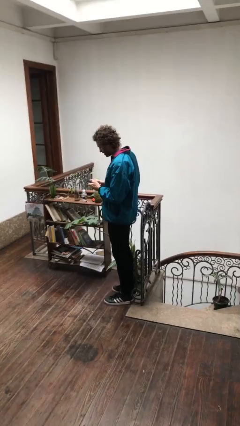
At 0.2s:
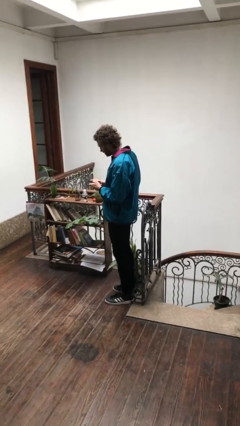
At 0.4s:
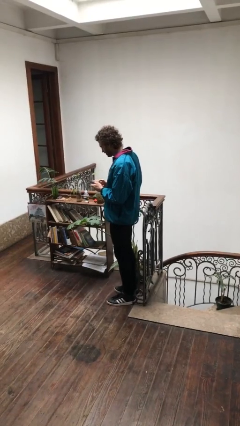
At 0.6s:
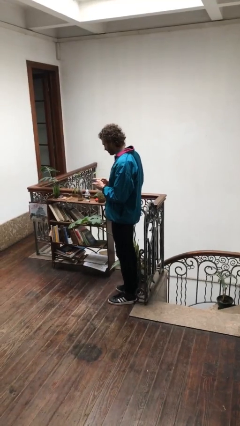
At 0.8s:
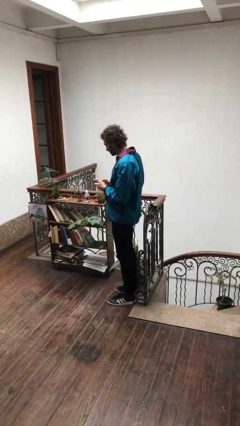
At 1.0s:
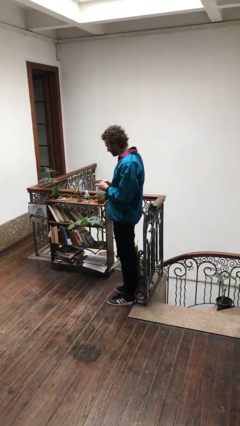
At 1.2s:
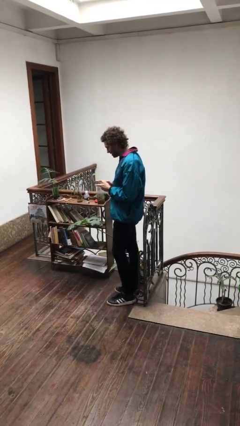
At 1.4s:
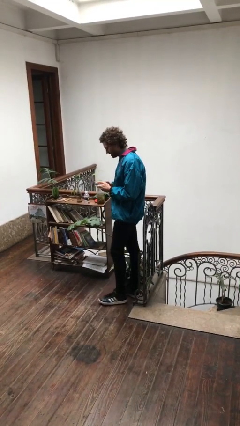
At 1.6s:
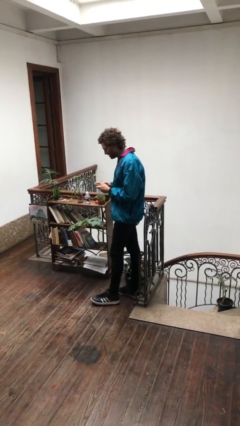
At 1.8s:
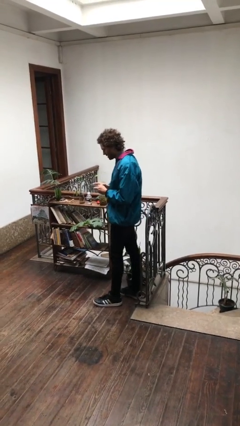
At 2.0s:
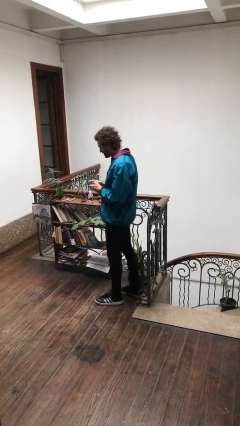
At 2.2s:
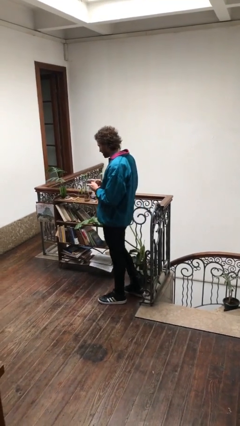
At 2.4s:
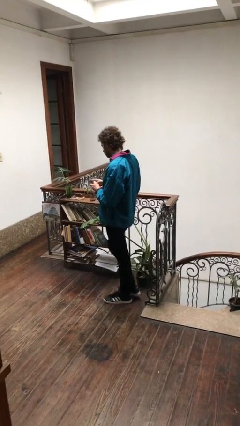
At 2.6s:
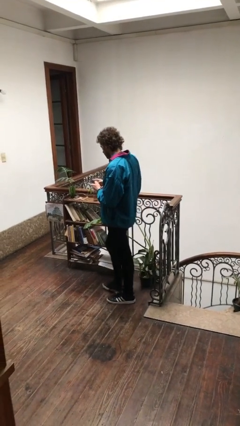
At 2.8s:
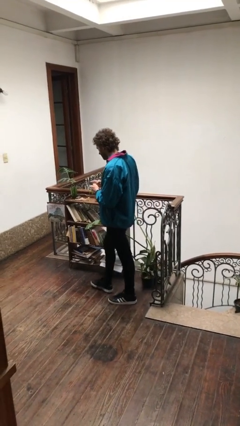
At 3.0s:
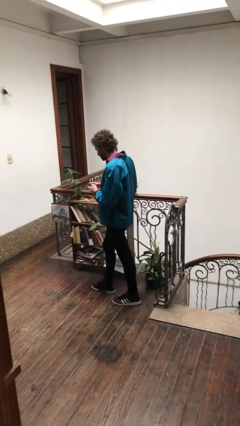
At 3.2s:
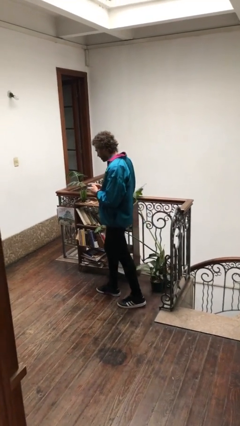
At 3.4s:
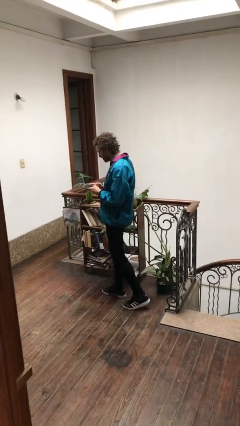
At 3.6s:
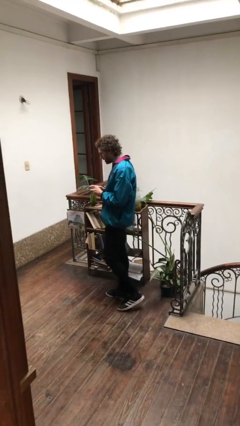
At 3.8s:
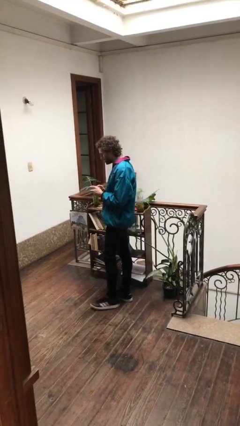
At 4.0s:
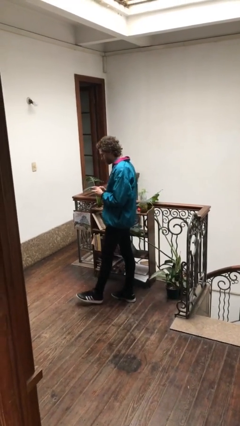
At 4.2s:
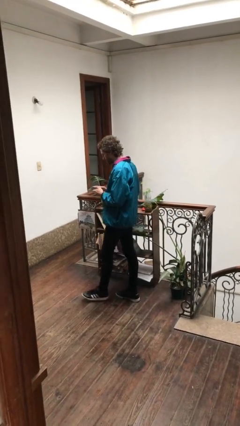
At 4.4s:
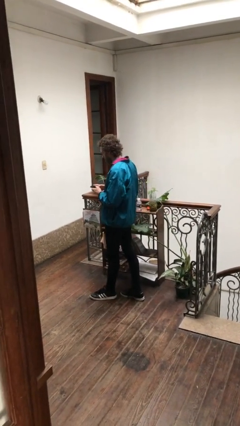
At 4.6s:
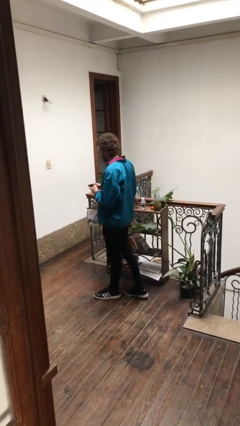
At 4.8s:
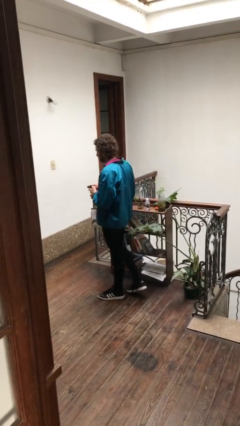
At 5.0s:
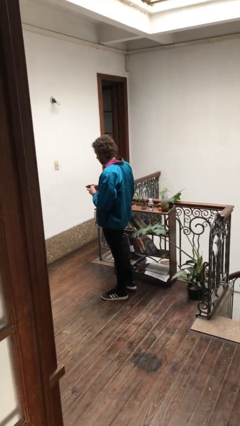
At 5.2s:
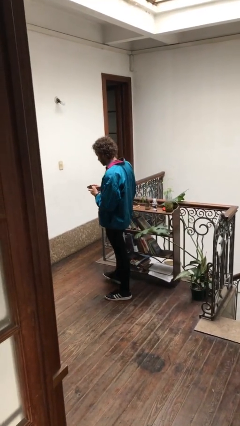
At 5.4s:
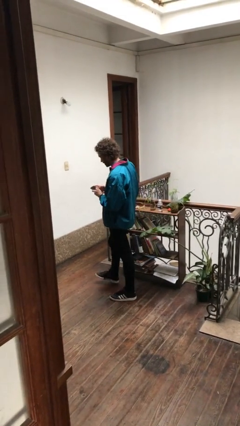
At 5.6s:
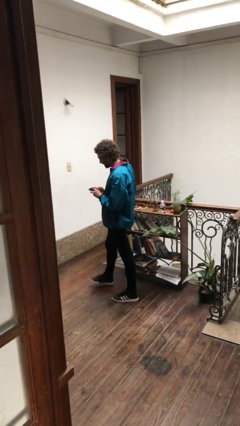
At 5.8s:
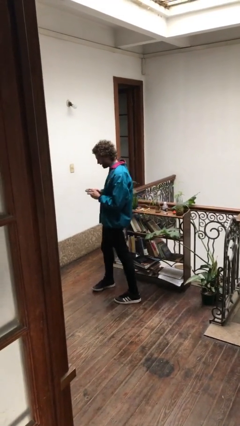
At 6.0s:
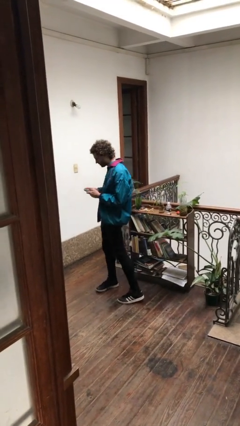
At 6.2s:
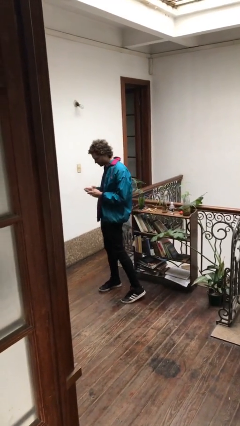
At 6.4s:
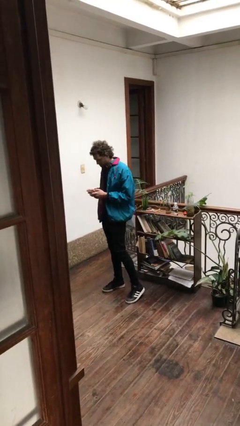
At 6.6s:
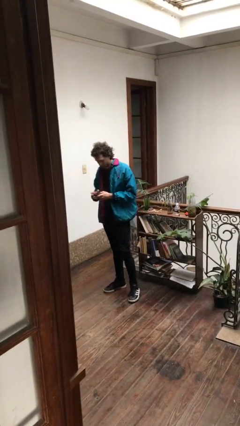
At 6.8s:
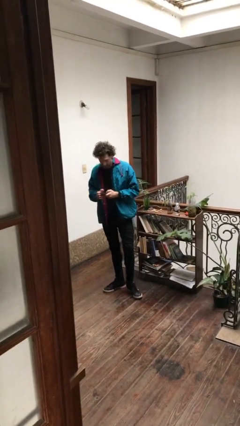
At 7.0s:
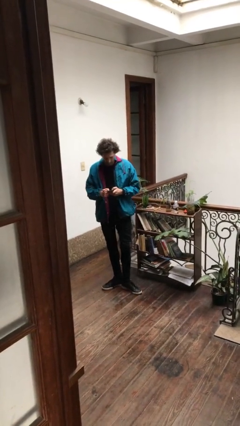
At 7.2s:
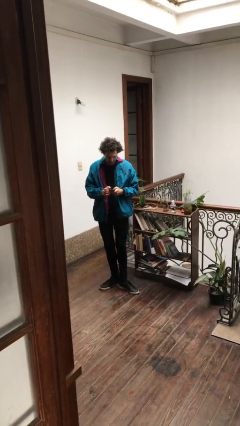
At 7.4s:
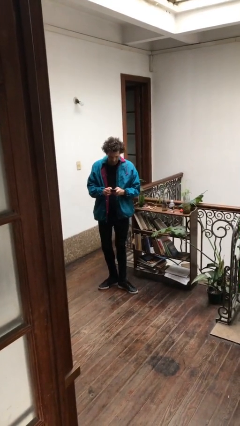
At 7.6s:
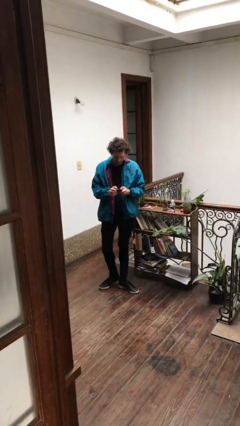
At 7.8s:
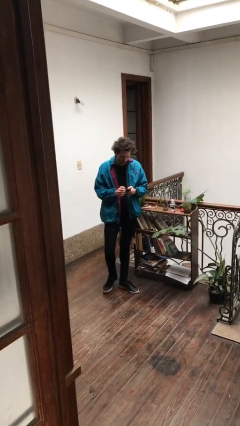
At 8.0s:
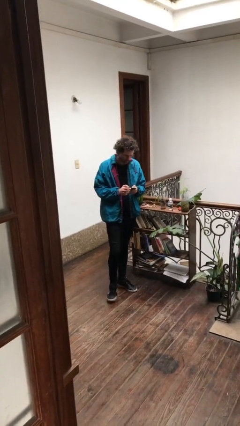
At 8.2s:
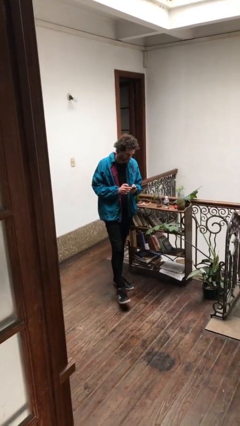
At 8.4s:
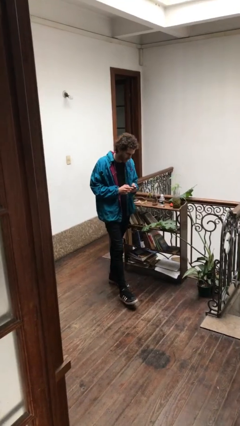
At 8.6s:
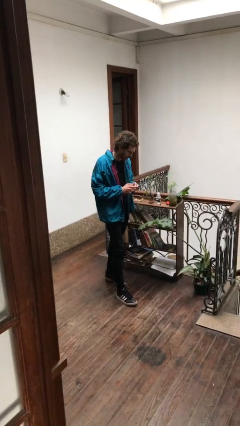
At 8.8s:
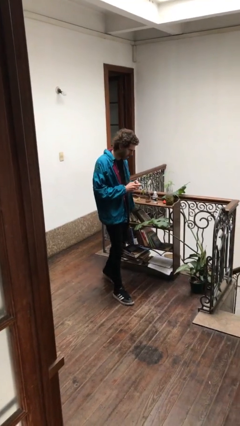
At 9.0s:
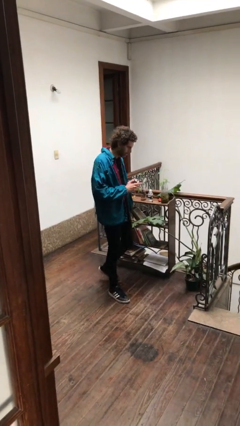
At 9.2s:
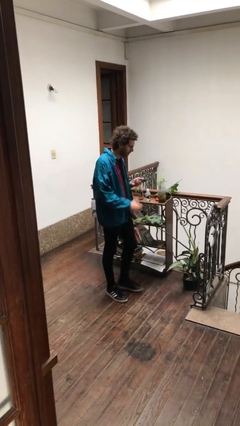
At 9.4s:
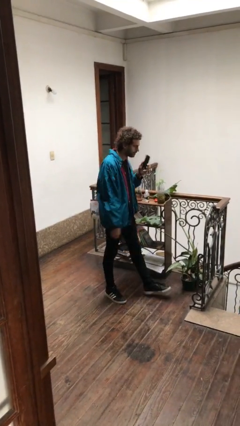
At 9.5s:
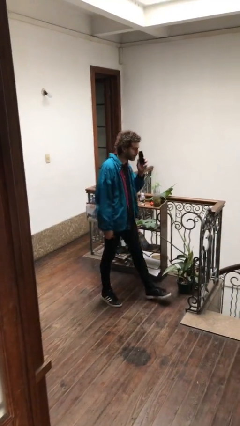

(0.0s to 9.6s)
person texts on phone

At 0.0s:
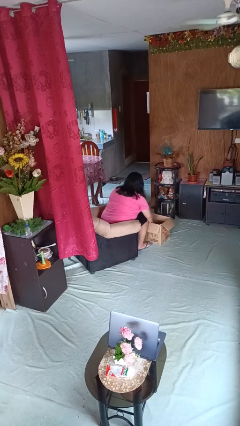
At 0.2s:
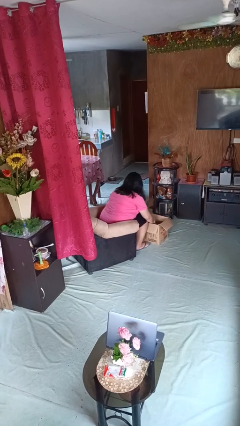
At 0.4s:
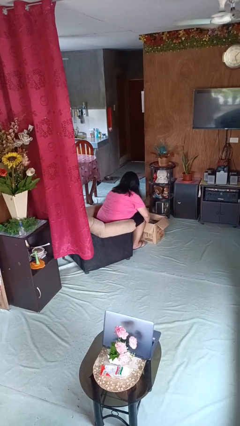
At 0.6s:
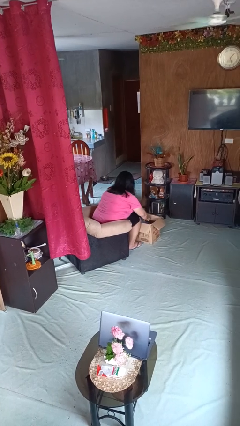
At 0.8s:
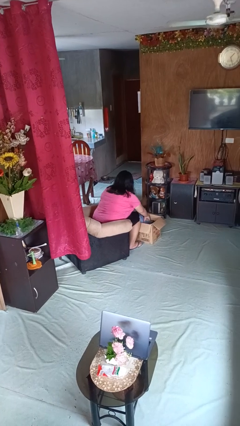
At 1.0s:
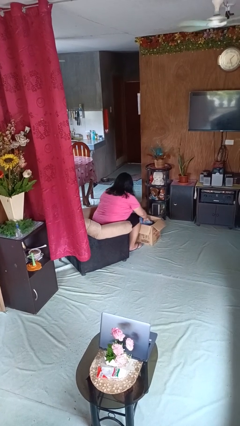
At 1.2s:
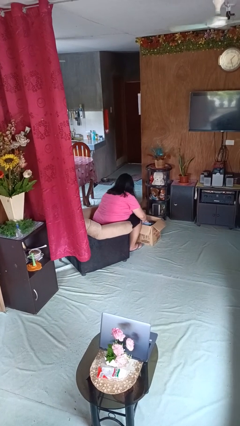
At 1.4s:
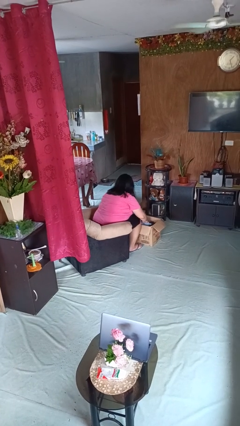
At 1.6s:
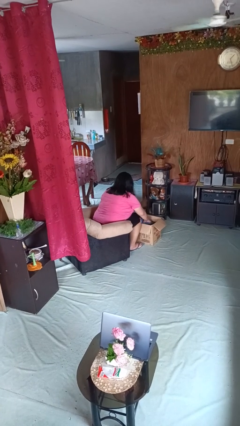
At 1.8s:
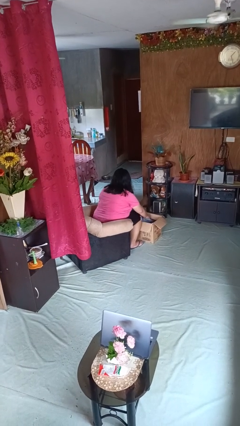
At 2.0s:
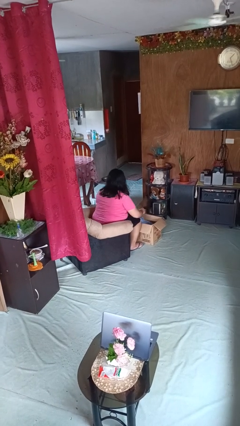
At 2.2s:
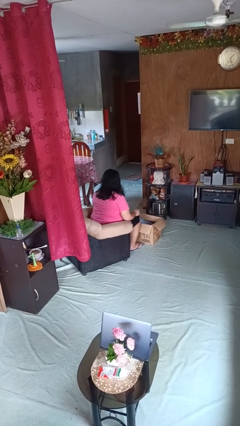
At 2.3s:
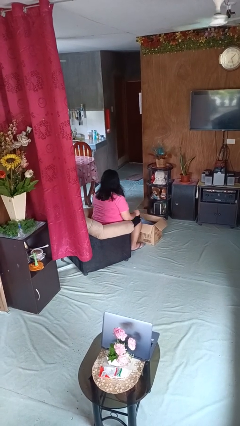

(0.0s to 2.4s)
person searches in box

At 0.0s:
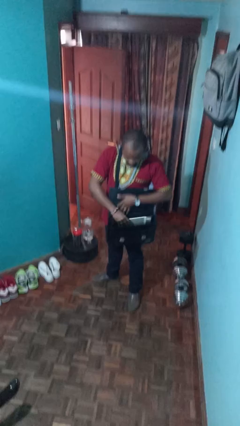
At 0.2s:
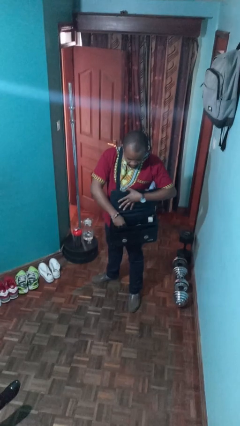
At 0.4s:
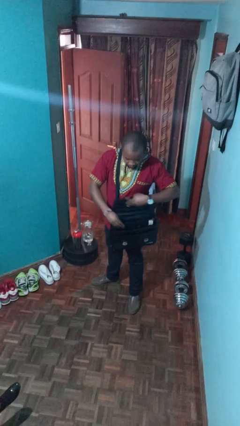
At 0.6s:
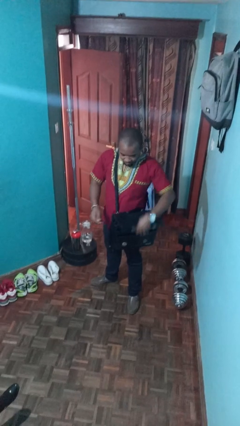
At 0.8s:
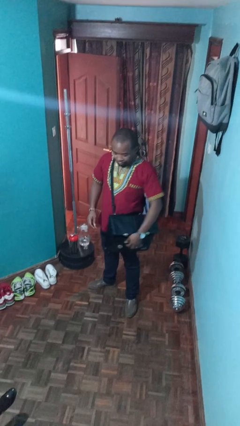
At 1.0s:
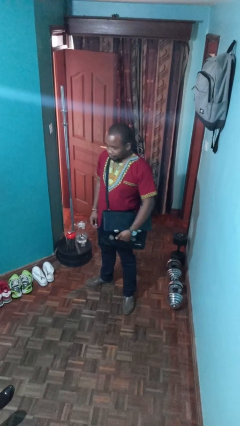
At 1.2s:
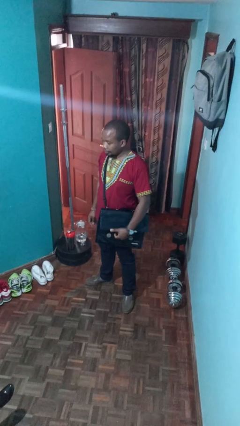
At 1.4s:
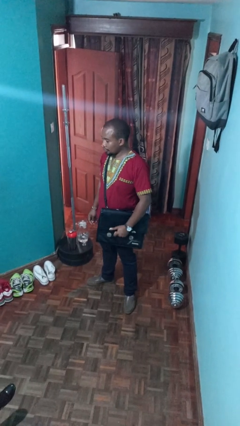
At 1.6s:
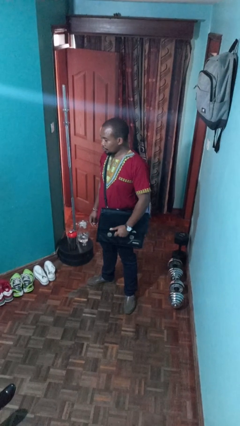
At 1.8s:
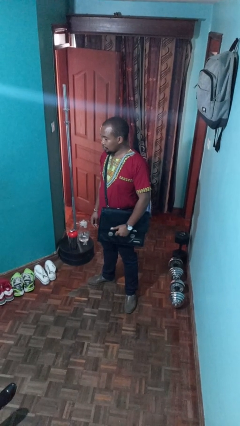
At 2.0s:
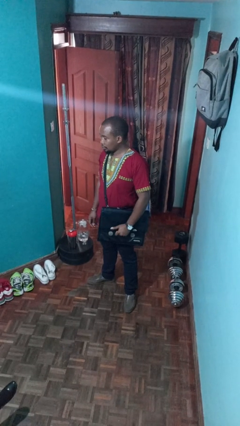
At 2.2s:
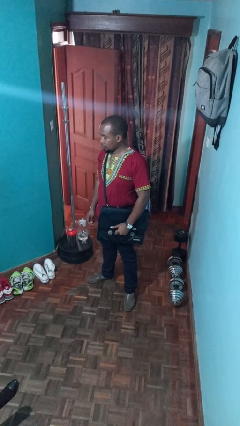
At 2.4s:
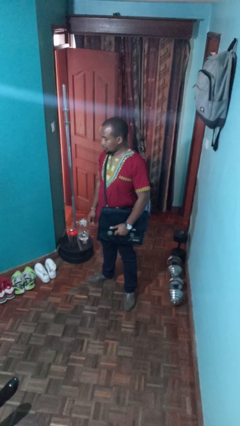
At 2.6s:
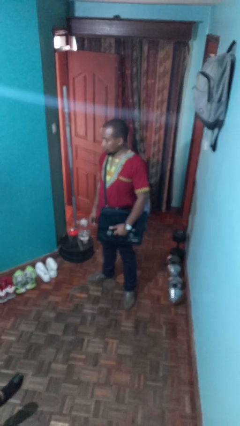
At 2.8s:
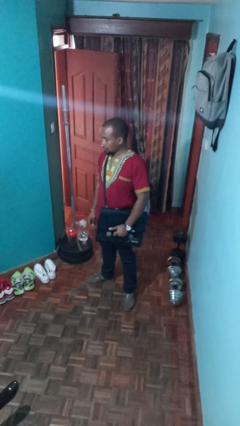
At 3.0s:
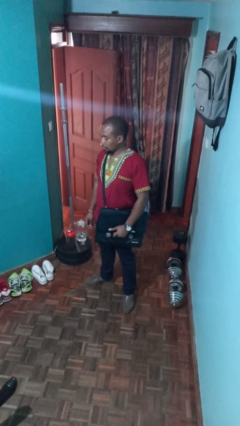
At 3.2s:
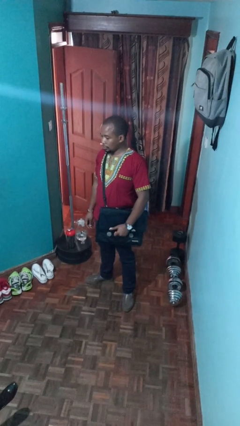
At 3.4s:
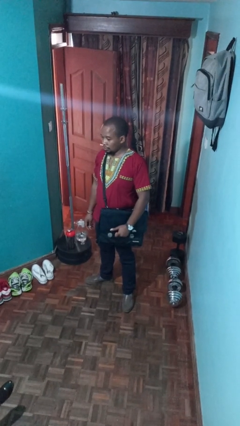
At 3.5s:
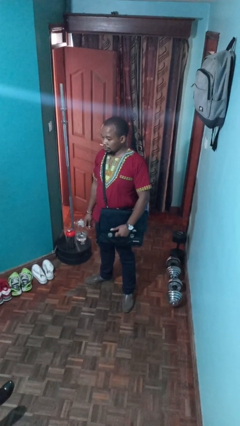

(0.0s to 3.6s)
person puts object into purse

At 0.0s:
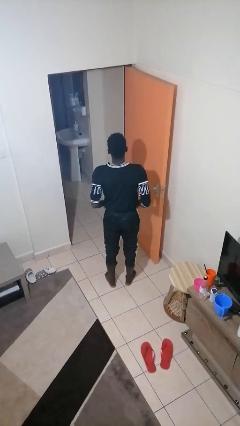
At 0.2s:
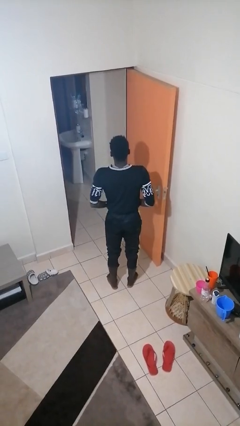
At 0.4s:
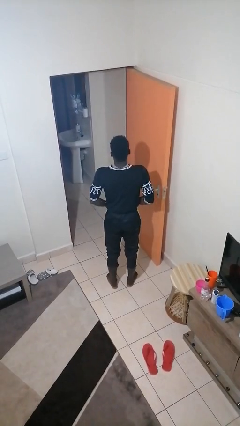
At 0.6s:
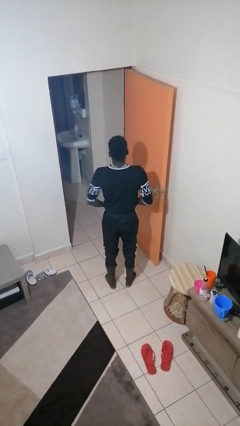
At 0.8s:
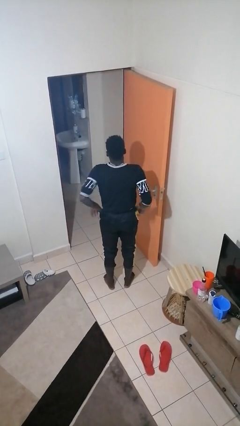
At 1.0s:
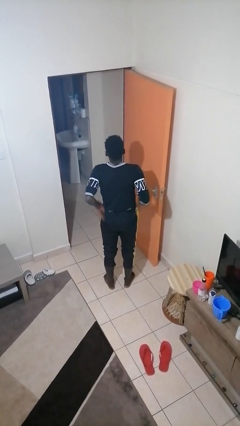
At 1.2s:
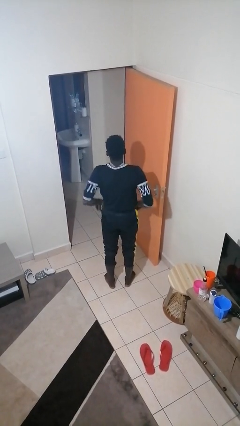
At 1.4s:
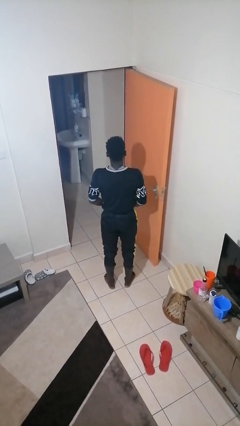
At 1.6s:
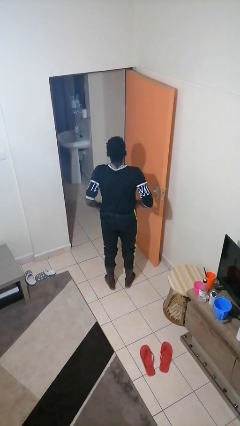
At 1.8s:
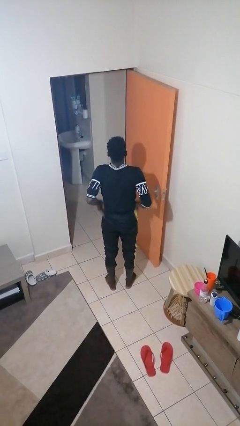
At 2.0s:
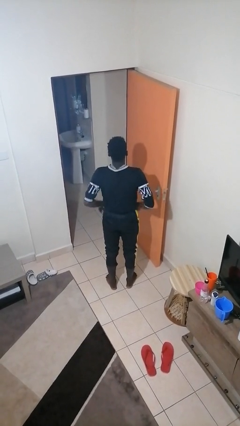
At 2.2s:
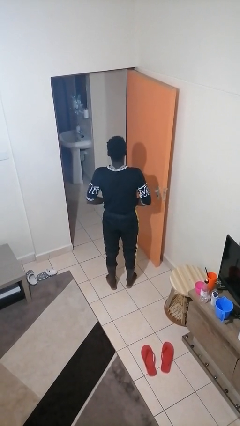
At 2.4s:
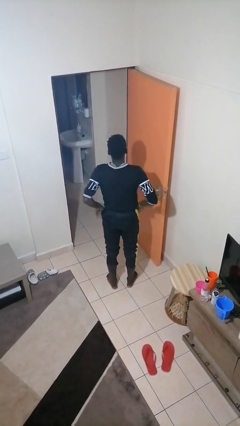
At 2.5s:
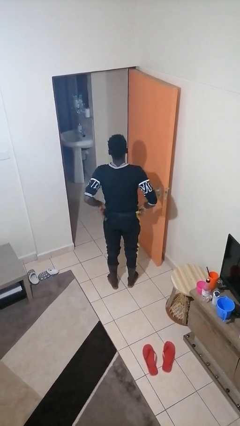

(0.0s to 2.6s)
person hikes up pants
